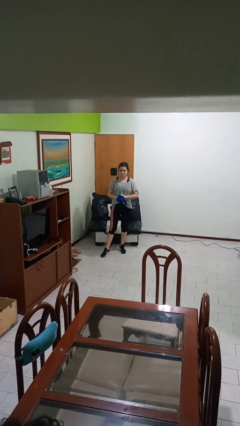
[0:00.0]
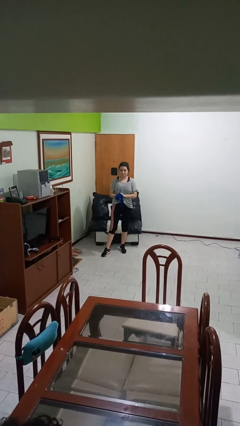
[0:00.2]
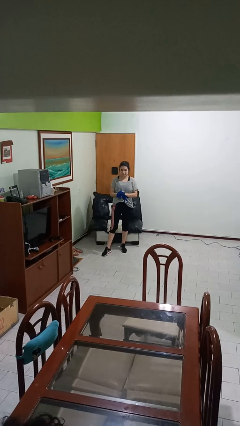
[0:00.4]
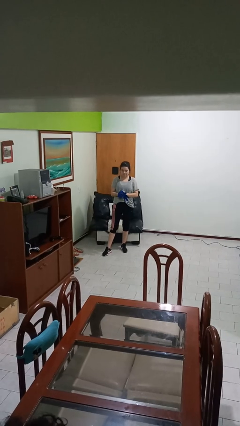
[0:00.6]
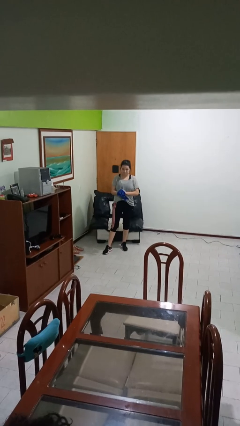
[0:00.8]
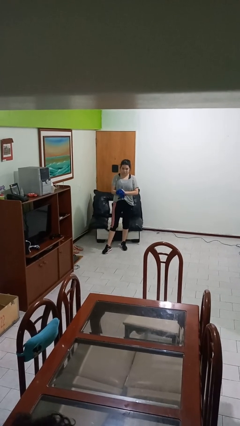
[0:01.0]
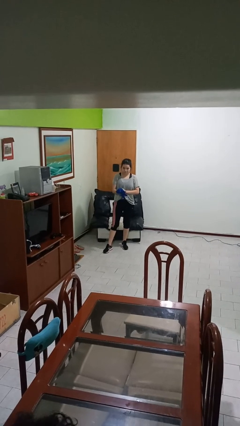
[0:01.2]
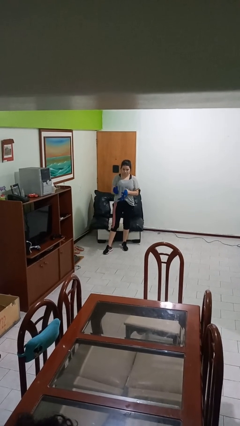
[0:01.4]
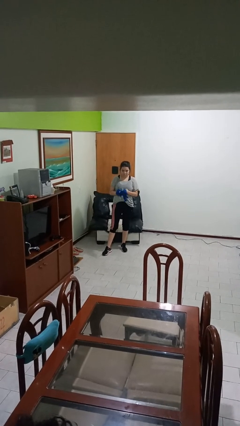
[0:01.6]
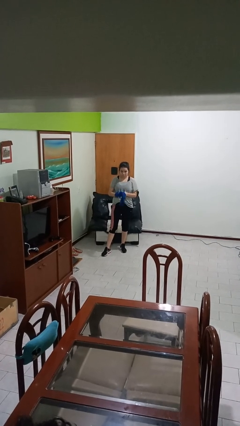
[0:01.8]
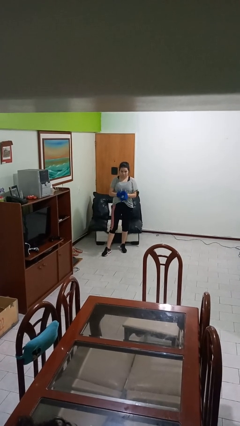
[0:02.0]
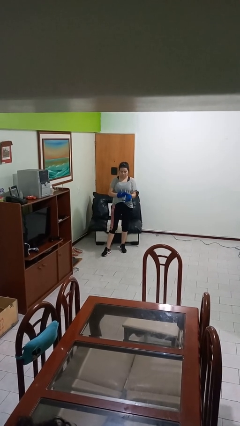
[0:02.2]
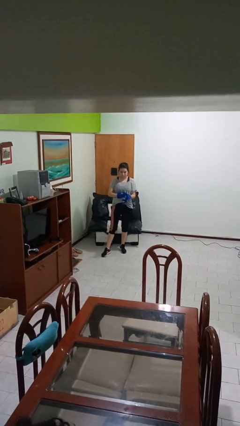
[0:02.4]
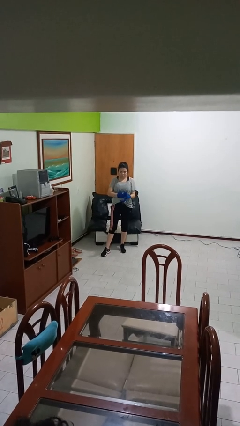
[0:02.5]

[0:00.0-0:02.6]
person puts on gloves

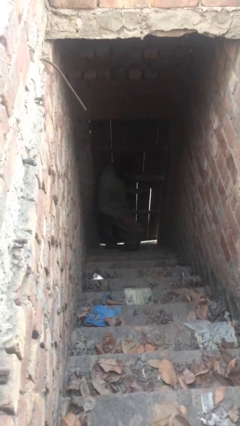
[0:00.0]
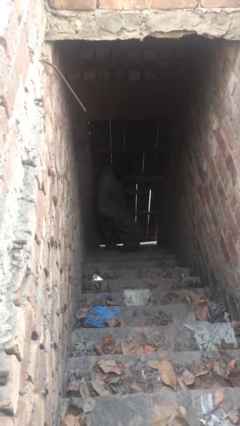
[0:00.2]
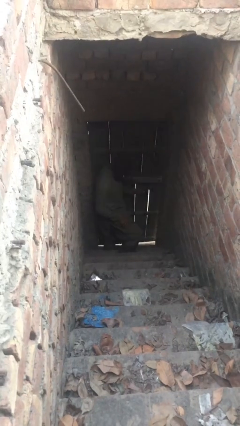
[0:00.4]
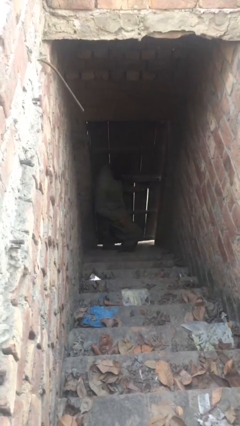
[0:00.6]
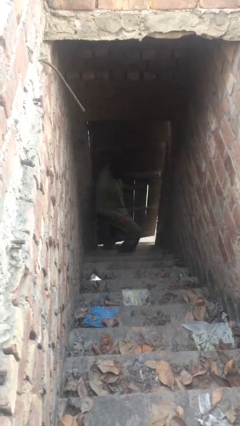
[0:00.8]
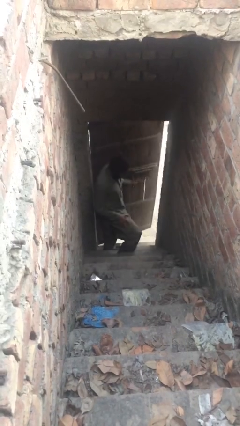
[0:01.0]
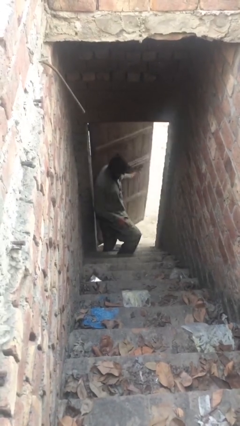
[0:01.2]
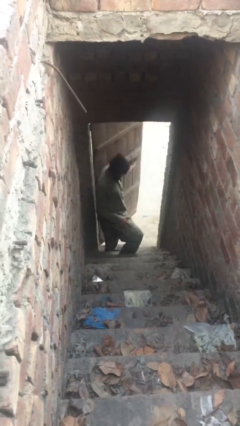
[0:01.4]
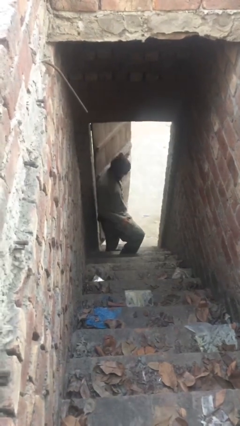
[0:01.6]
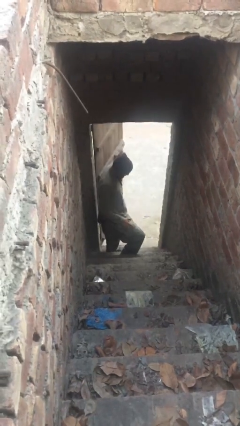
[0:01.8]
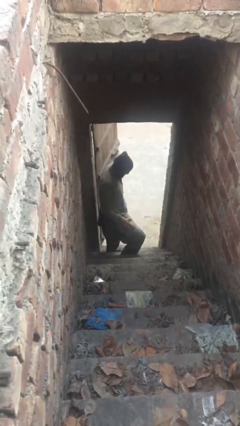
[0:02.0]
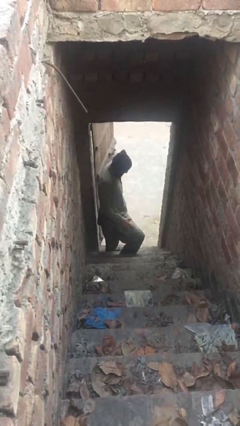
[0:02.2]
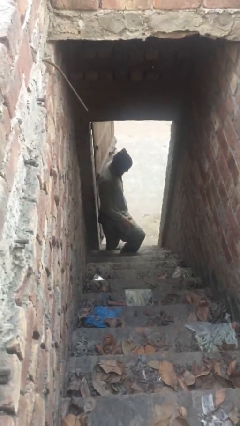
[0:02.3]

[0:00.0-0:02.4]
person opens facility door

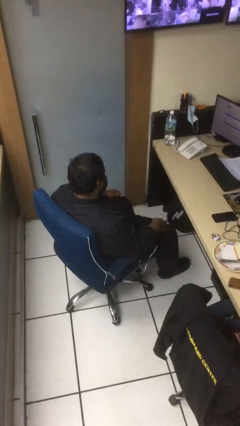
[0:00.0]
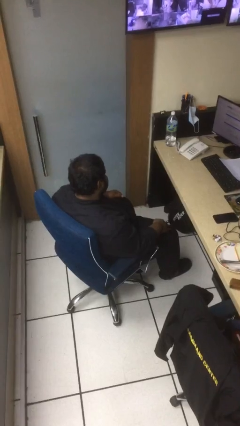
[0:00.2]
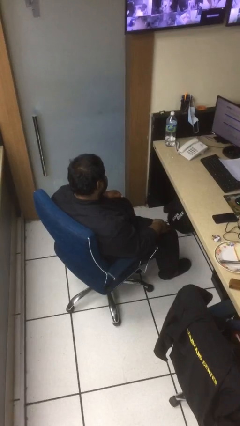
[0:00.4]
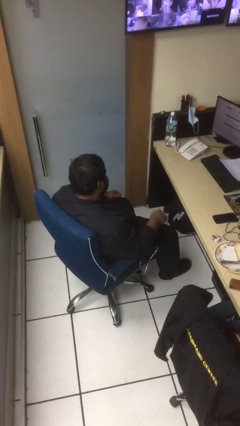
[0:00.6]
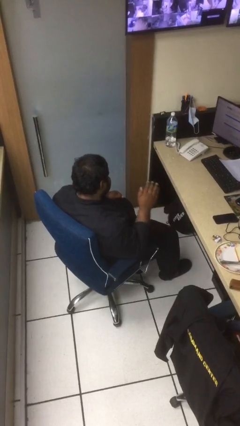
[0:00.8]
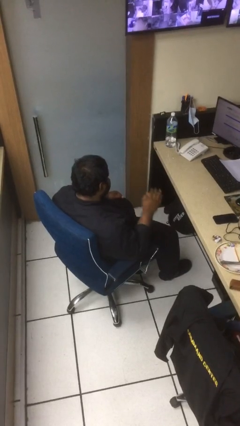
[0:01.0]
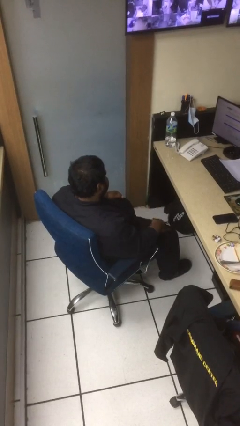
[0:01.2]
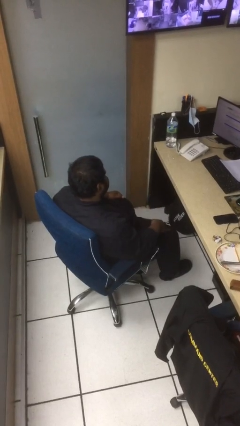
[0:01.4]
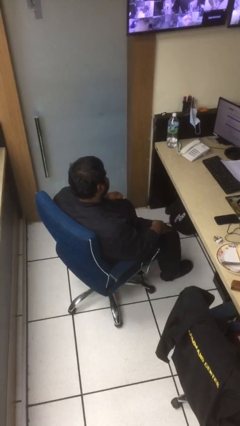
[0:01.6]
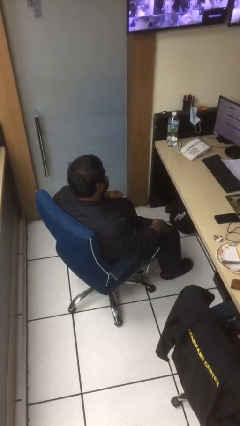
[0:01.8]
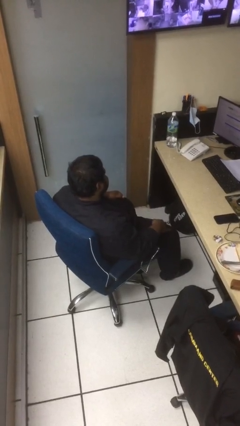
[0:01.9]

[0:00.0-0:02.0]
person slaps hands on thighs

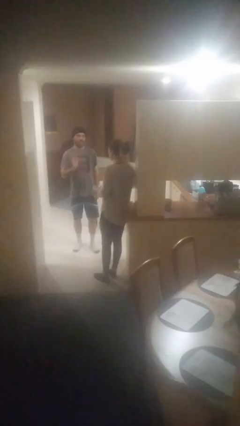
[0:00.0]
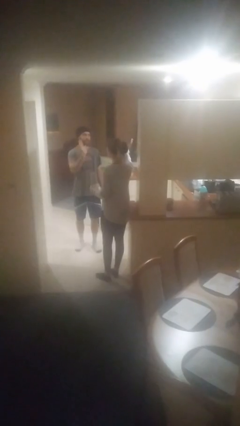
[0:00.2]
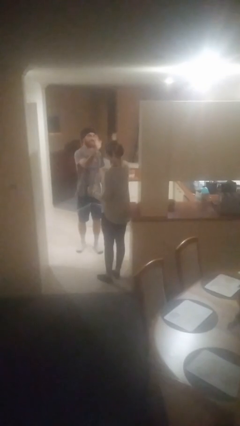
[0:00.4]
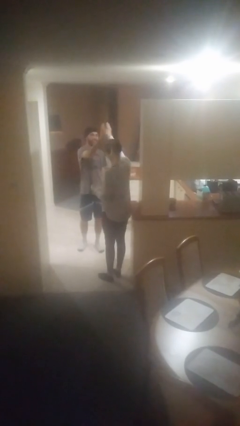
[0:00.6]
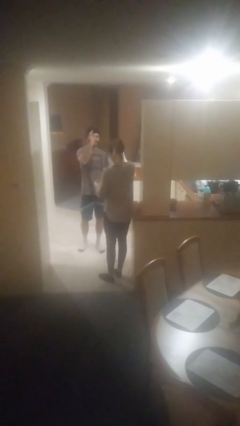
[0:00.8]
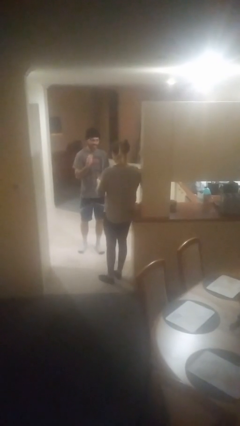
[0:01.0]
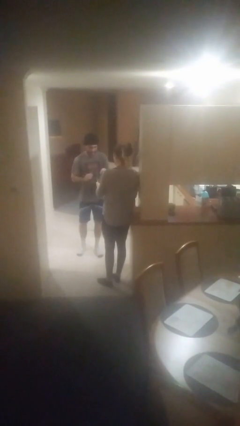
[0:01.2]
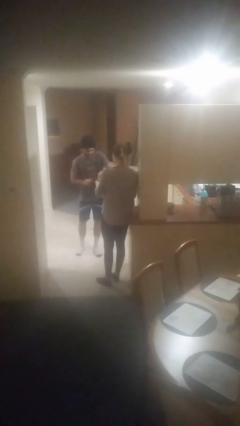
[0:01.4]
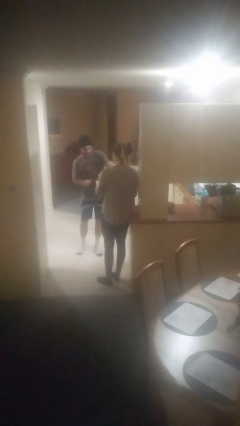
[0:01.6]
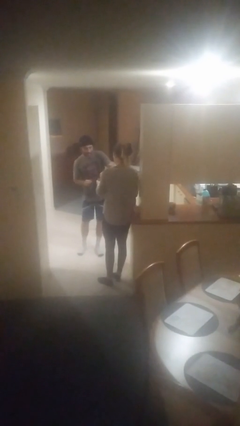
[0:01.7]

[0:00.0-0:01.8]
person highfives hand

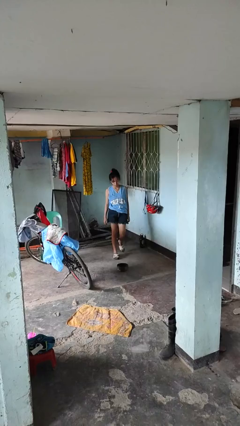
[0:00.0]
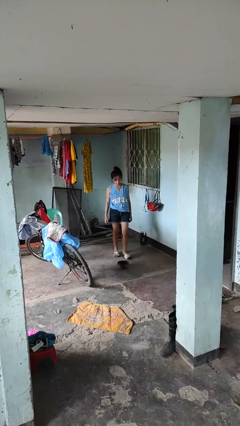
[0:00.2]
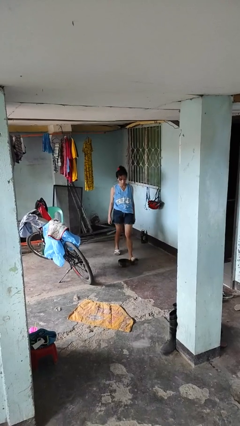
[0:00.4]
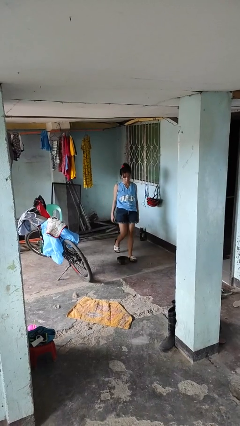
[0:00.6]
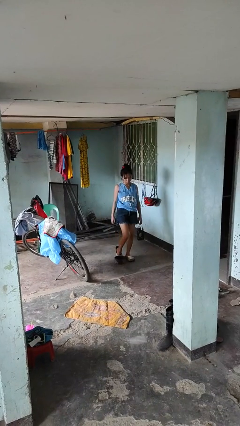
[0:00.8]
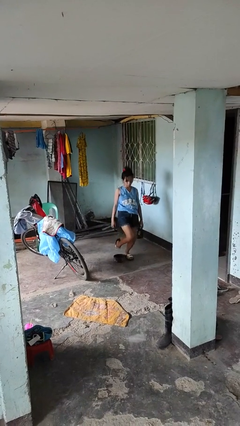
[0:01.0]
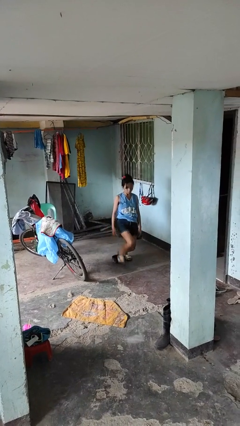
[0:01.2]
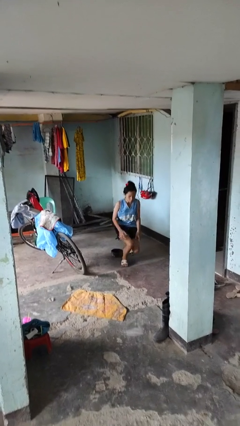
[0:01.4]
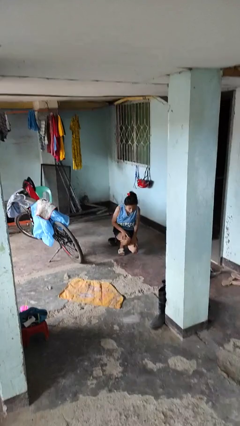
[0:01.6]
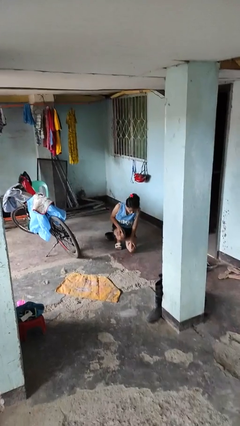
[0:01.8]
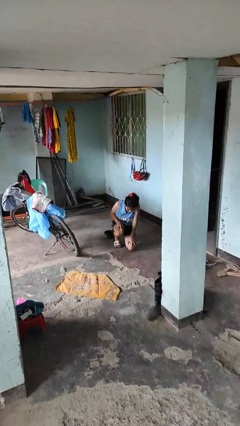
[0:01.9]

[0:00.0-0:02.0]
person trips on object on floor

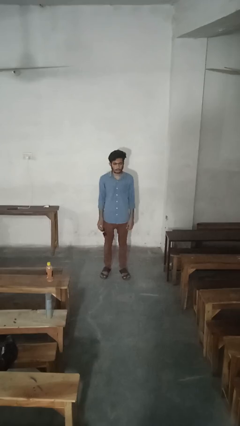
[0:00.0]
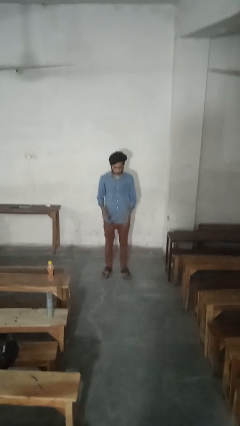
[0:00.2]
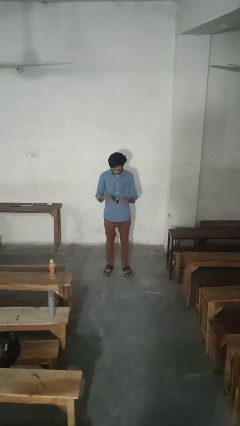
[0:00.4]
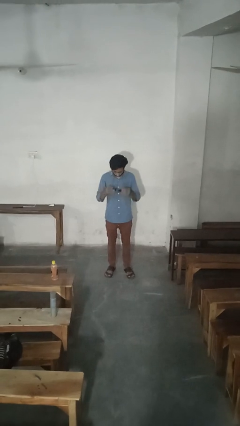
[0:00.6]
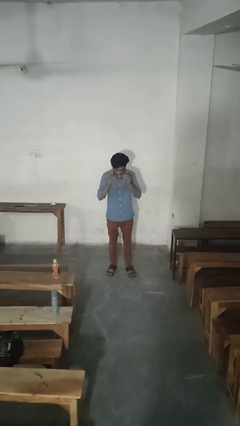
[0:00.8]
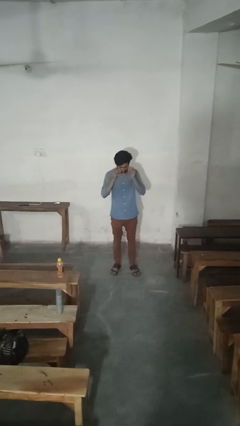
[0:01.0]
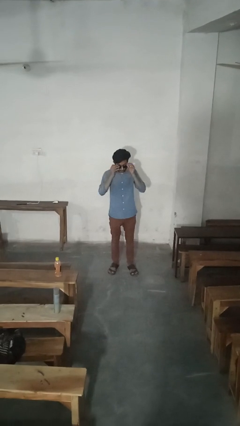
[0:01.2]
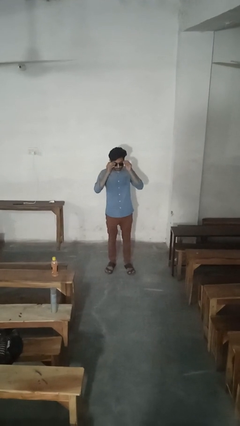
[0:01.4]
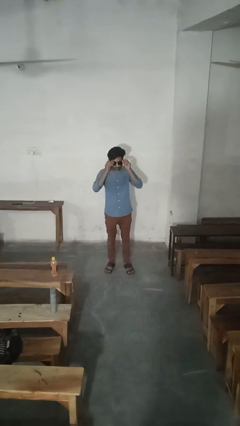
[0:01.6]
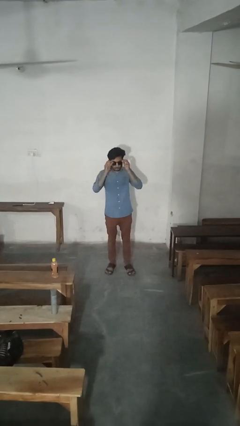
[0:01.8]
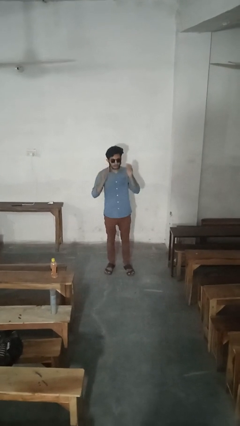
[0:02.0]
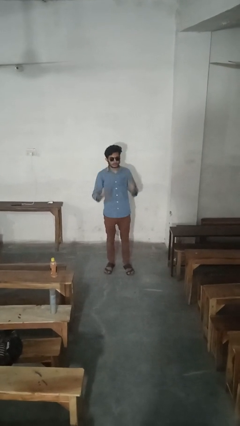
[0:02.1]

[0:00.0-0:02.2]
person puts on sunglasses

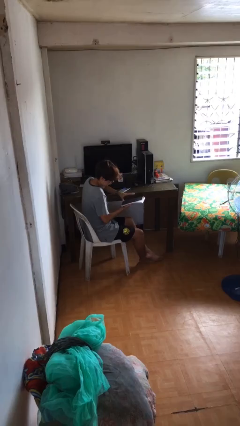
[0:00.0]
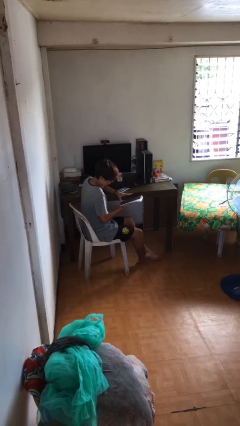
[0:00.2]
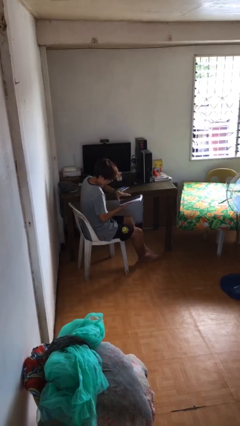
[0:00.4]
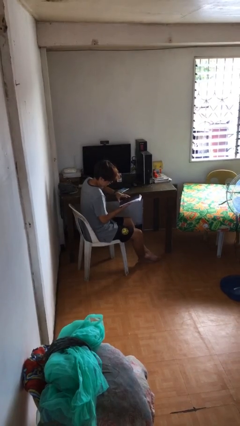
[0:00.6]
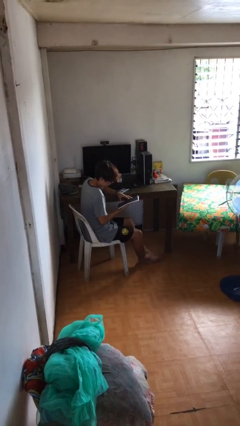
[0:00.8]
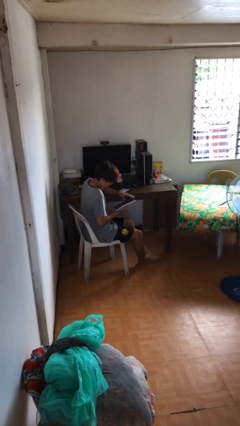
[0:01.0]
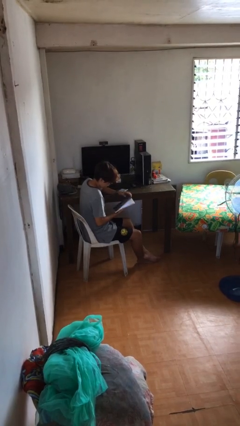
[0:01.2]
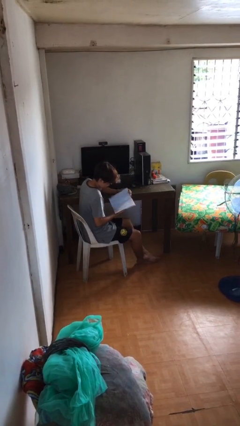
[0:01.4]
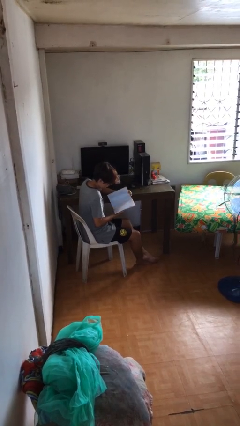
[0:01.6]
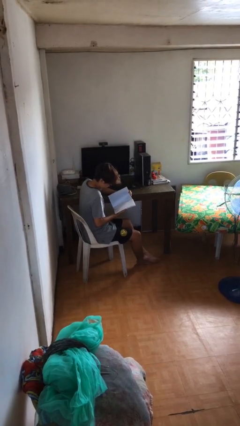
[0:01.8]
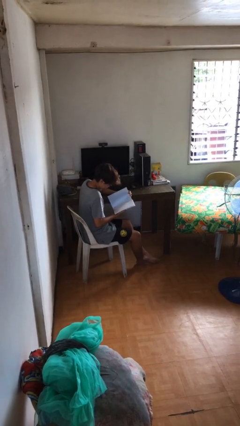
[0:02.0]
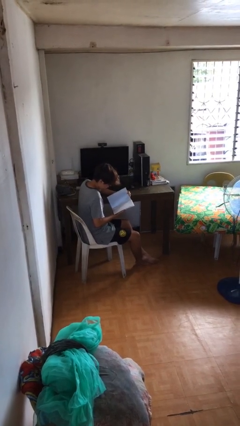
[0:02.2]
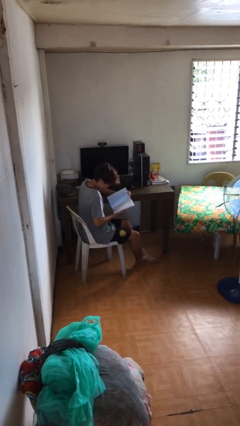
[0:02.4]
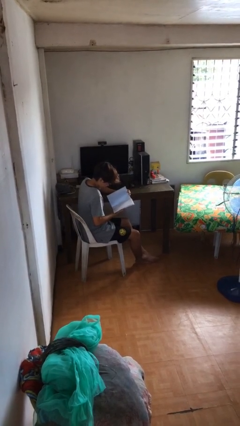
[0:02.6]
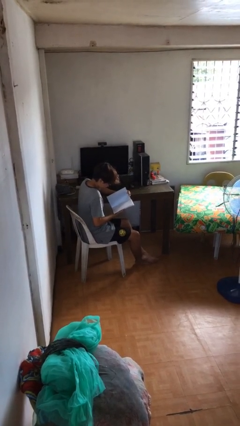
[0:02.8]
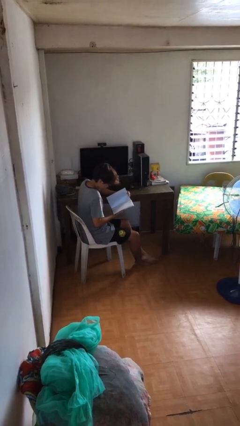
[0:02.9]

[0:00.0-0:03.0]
person reads document

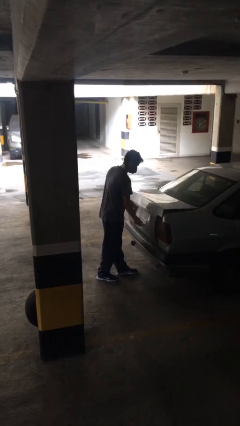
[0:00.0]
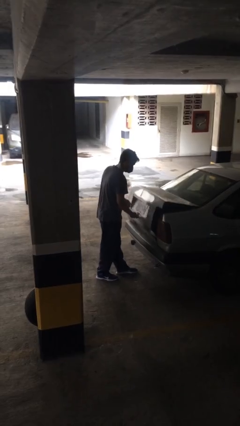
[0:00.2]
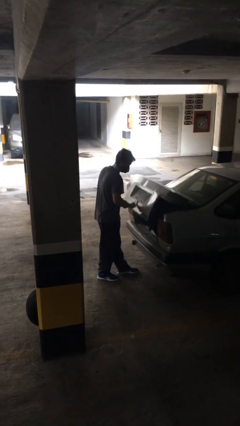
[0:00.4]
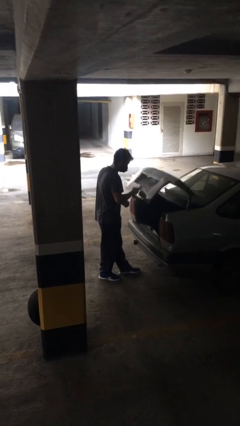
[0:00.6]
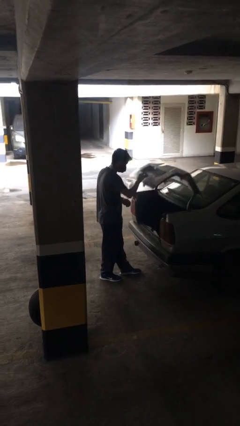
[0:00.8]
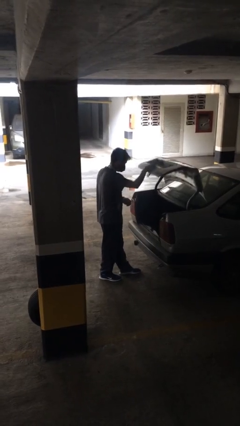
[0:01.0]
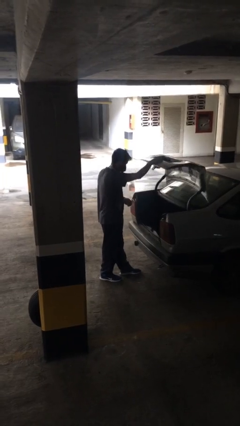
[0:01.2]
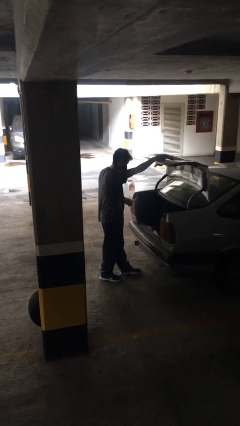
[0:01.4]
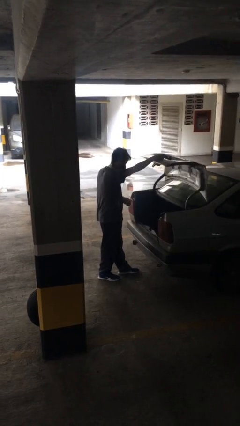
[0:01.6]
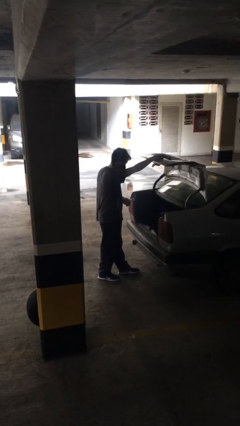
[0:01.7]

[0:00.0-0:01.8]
person opens car trunk
